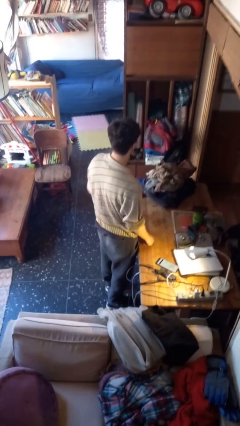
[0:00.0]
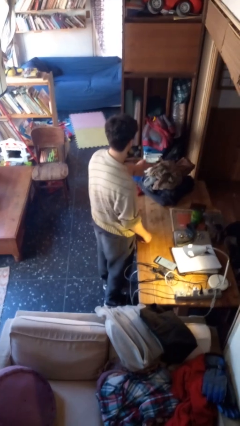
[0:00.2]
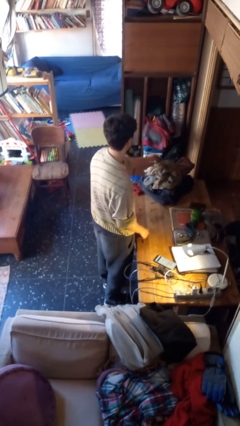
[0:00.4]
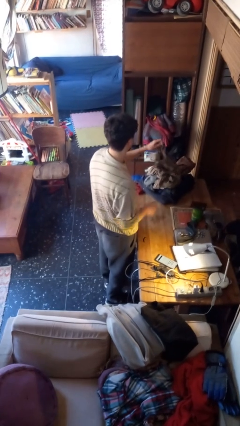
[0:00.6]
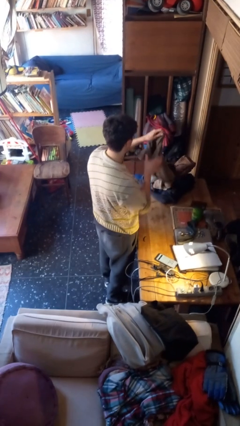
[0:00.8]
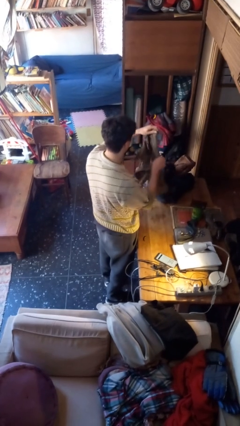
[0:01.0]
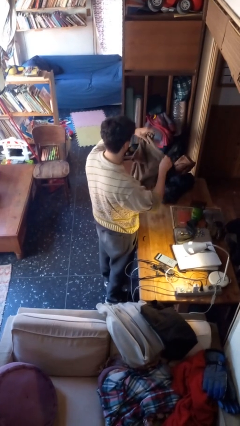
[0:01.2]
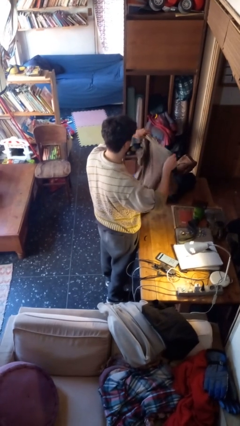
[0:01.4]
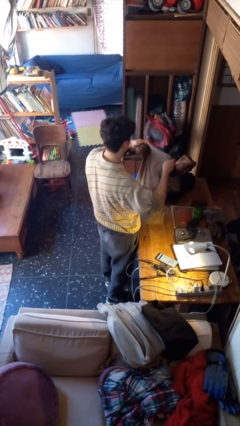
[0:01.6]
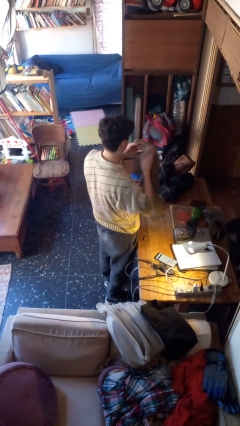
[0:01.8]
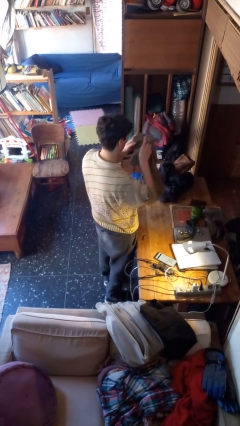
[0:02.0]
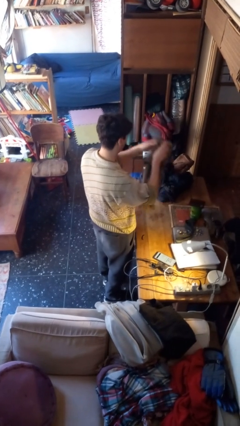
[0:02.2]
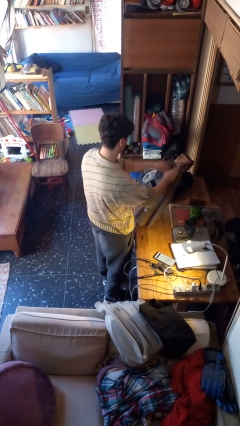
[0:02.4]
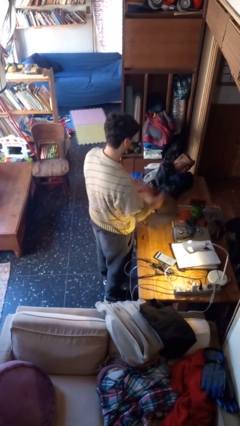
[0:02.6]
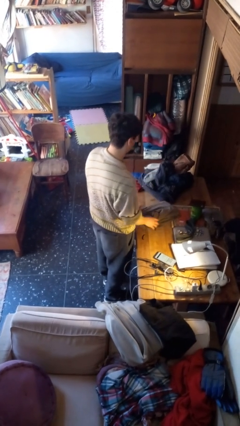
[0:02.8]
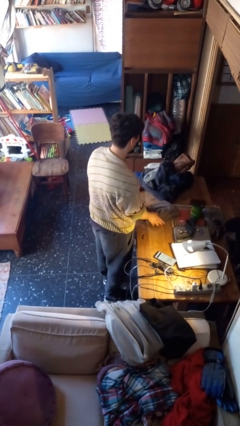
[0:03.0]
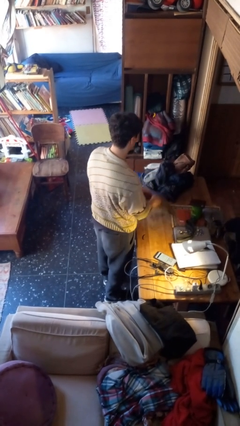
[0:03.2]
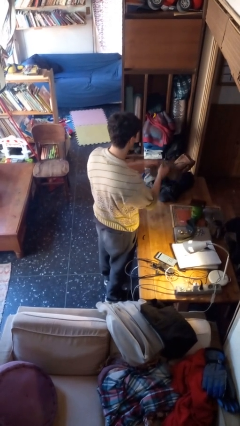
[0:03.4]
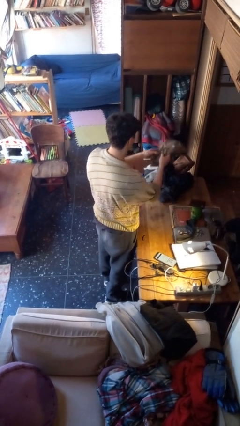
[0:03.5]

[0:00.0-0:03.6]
person folds shirt

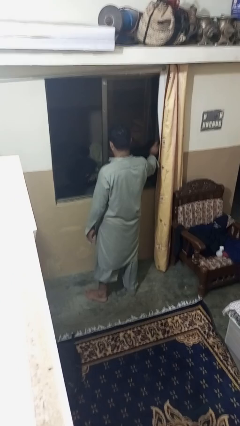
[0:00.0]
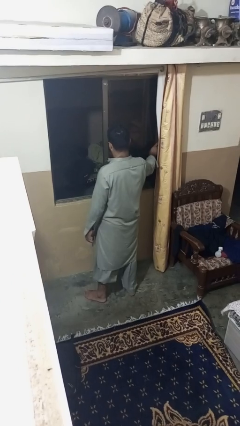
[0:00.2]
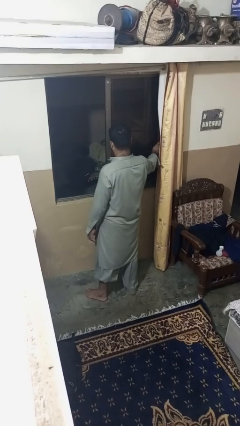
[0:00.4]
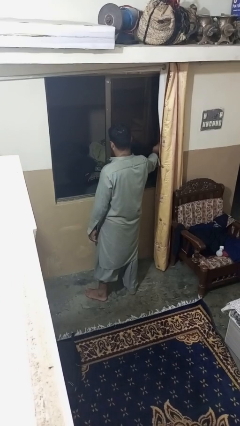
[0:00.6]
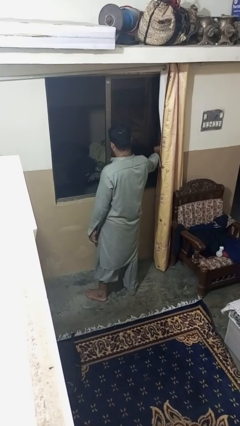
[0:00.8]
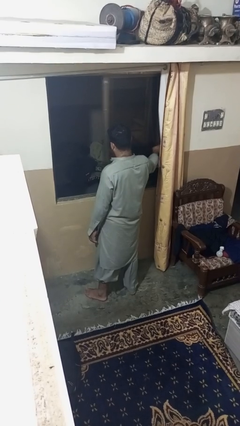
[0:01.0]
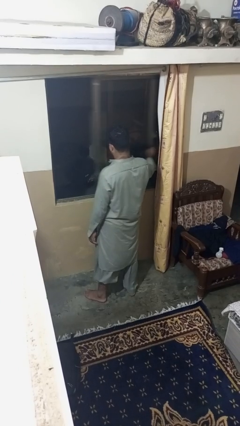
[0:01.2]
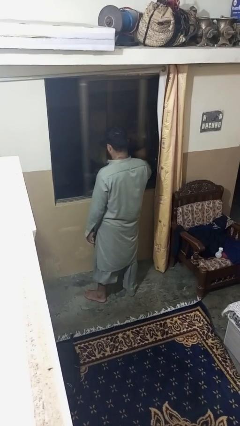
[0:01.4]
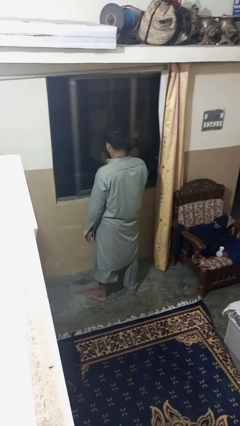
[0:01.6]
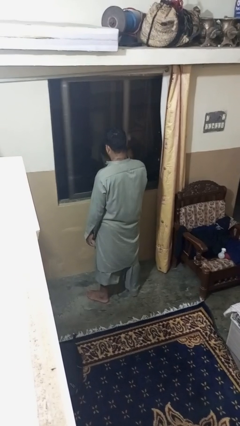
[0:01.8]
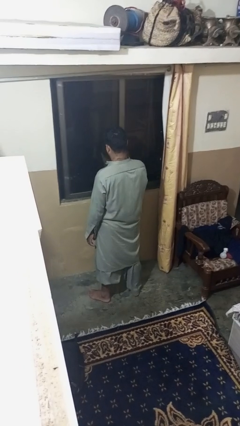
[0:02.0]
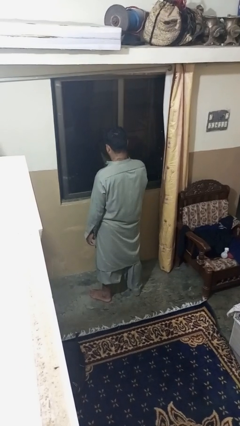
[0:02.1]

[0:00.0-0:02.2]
person closes home window

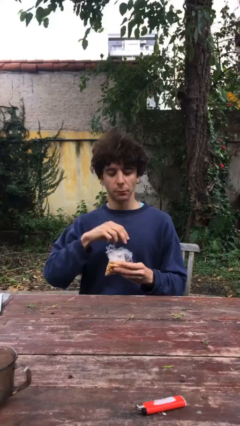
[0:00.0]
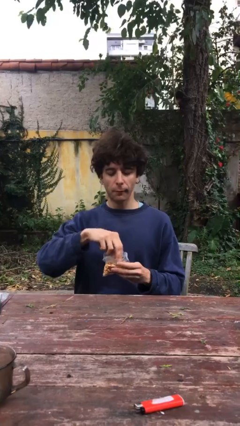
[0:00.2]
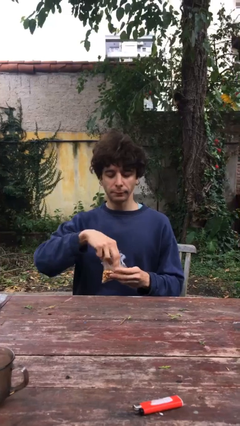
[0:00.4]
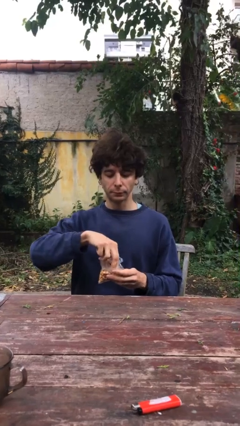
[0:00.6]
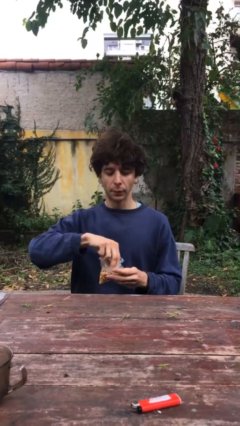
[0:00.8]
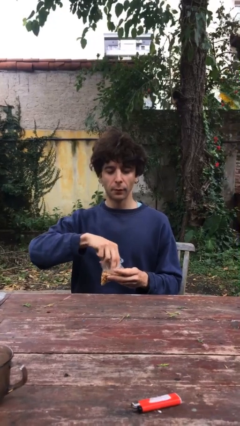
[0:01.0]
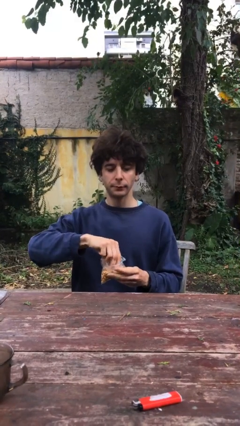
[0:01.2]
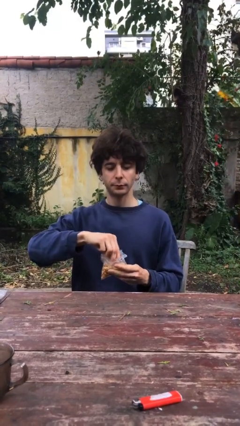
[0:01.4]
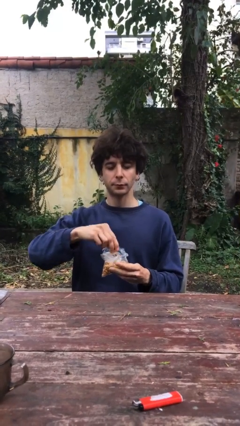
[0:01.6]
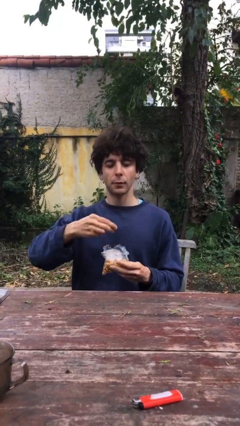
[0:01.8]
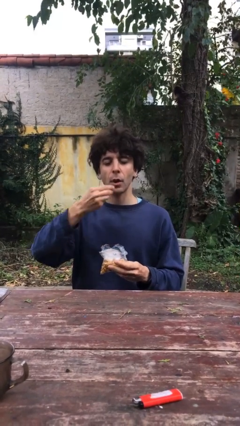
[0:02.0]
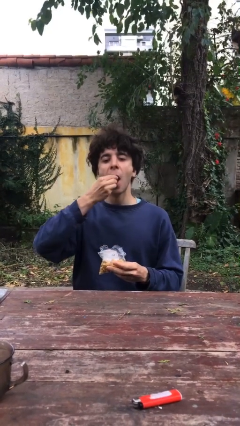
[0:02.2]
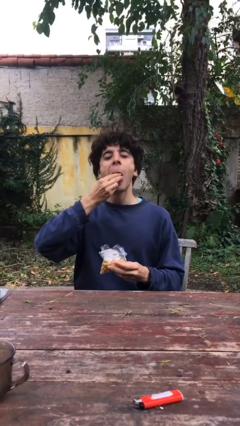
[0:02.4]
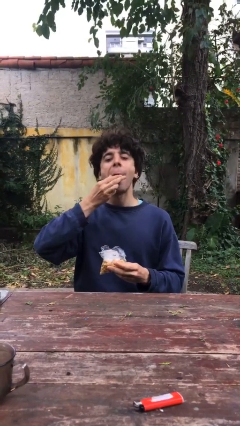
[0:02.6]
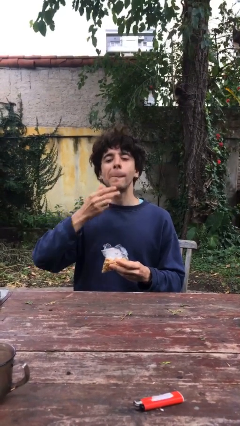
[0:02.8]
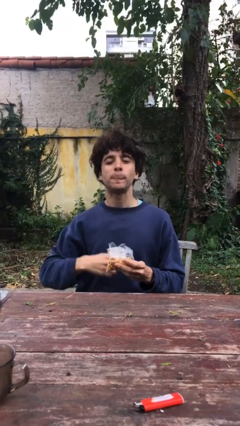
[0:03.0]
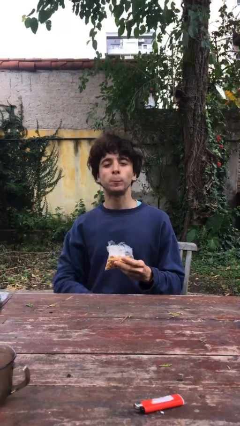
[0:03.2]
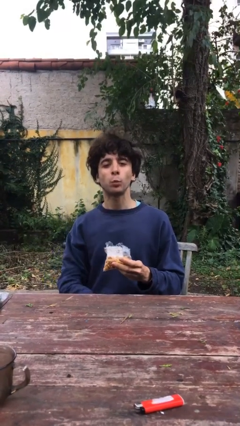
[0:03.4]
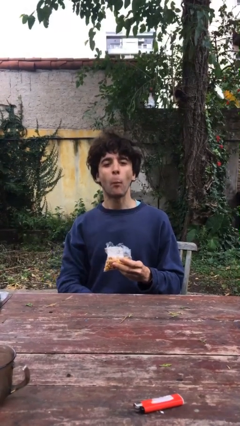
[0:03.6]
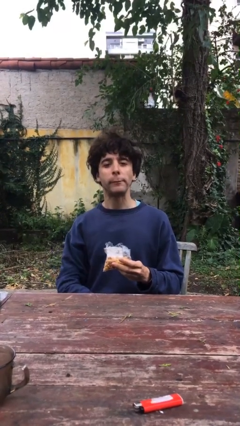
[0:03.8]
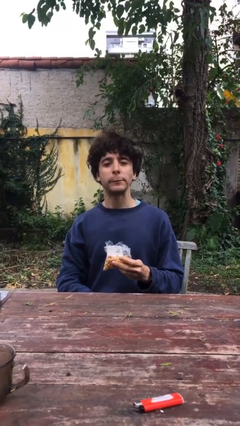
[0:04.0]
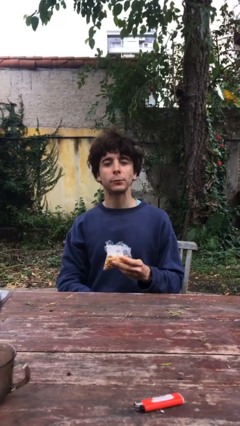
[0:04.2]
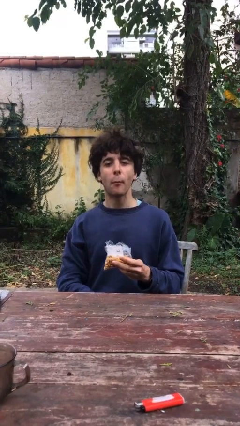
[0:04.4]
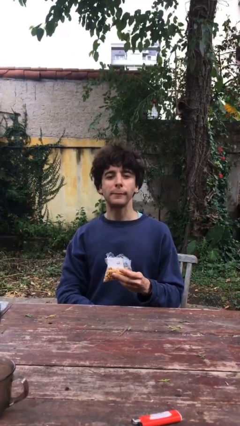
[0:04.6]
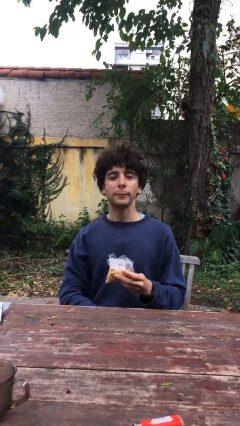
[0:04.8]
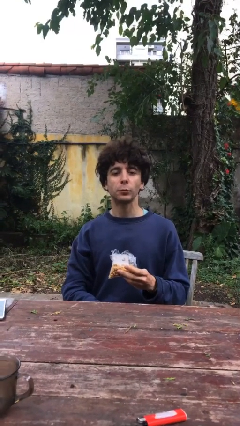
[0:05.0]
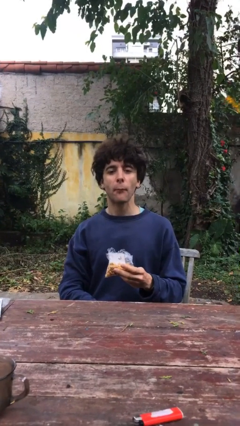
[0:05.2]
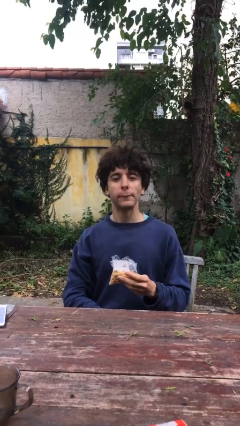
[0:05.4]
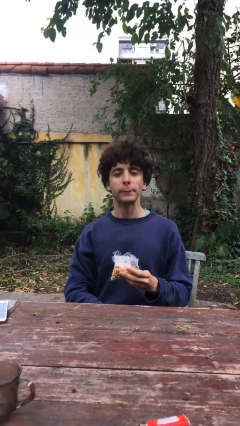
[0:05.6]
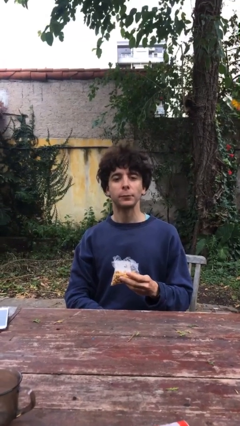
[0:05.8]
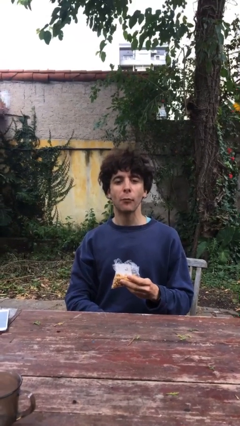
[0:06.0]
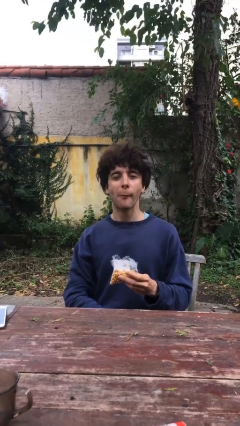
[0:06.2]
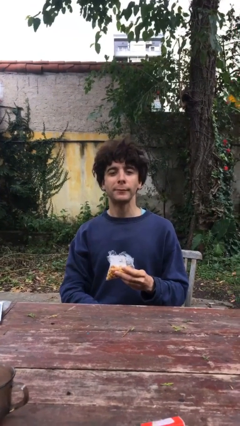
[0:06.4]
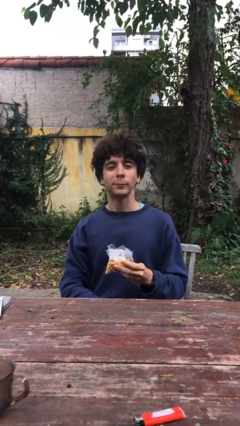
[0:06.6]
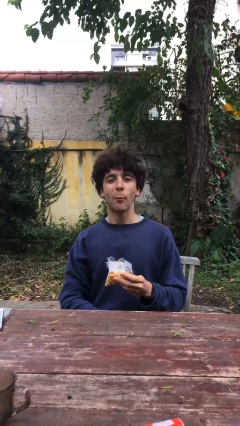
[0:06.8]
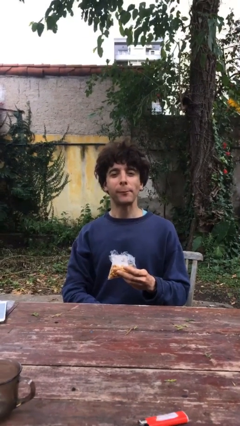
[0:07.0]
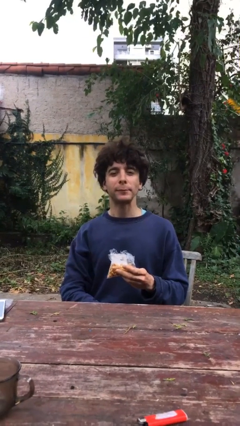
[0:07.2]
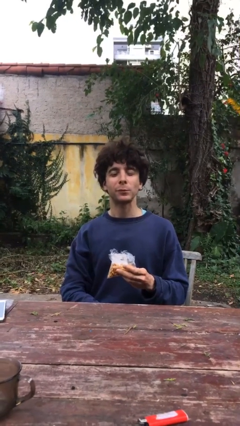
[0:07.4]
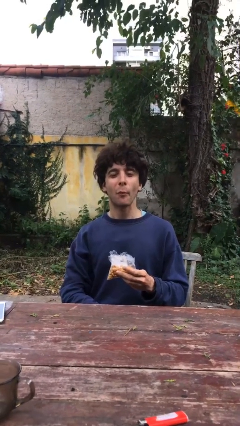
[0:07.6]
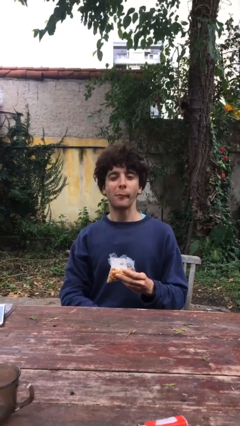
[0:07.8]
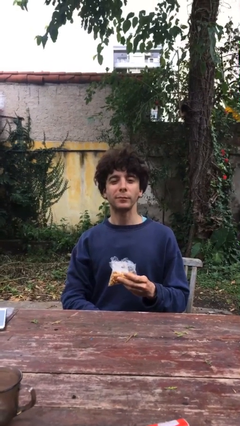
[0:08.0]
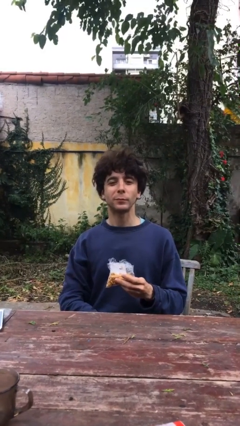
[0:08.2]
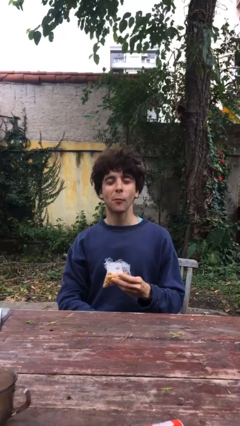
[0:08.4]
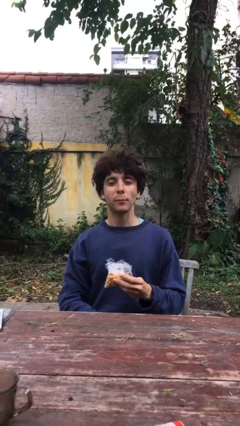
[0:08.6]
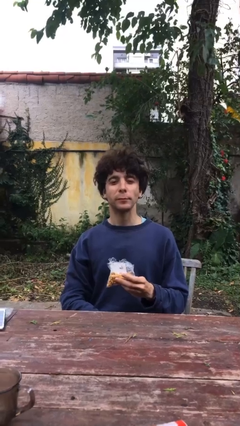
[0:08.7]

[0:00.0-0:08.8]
person eats snack from bag

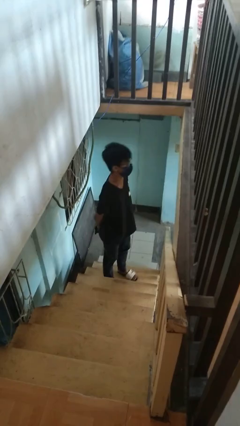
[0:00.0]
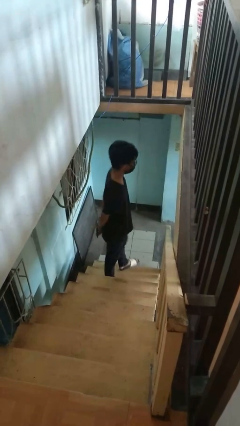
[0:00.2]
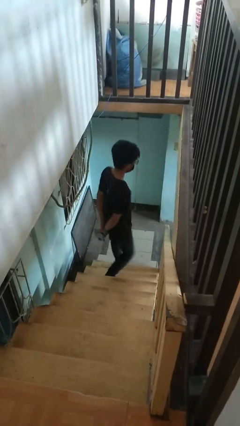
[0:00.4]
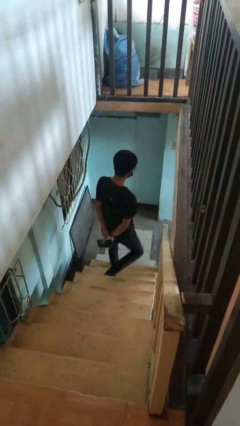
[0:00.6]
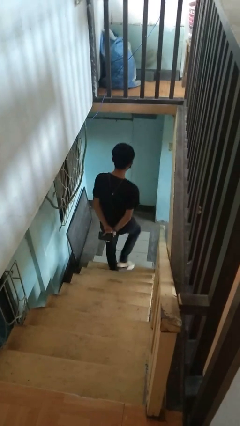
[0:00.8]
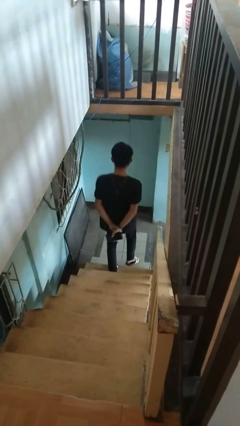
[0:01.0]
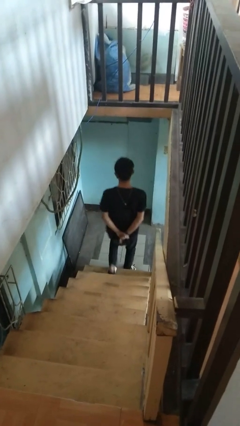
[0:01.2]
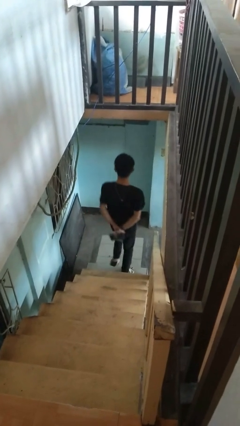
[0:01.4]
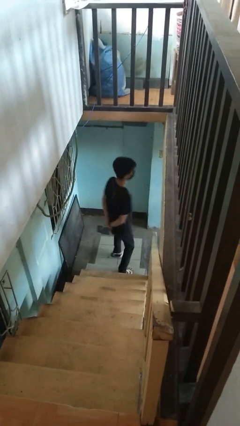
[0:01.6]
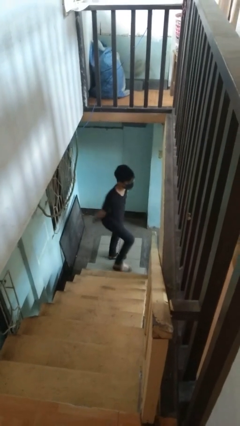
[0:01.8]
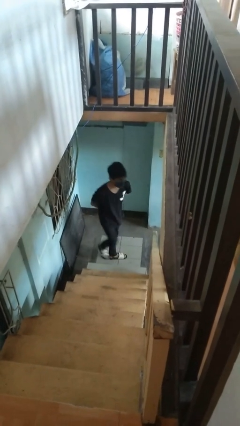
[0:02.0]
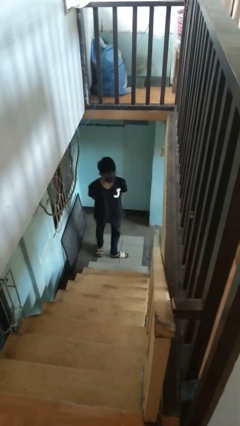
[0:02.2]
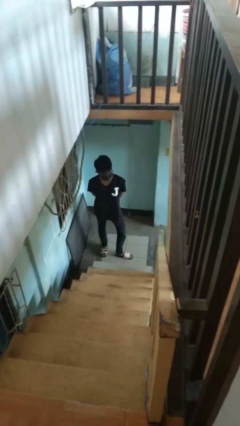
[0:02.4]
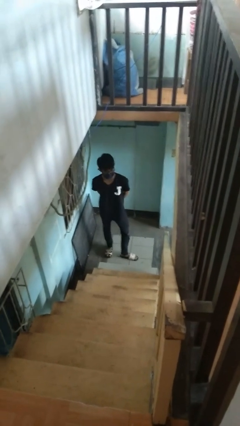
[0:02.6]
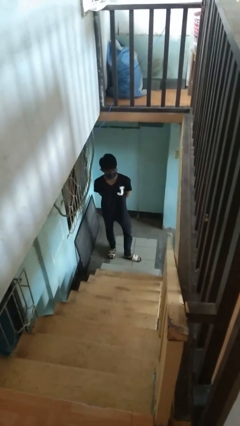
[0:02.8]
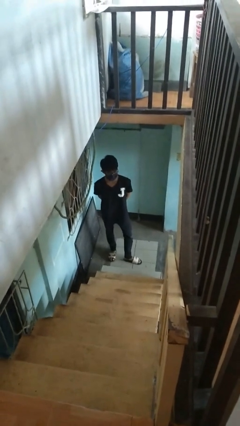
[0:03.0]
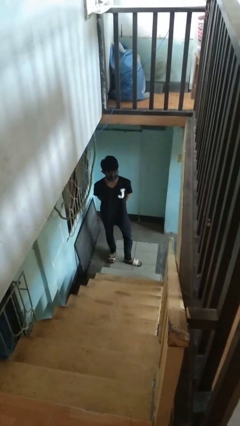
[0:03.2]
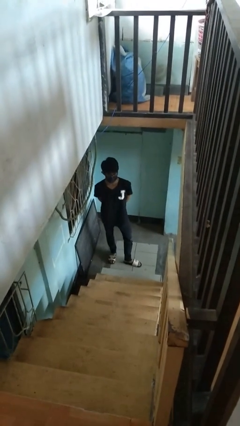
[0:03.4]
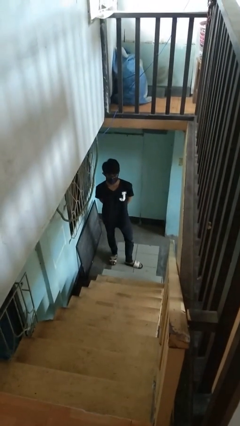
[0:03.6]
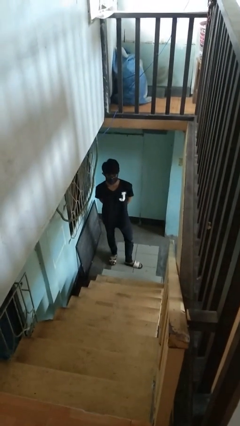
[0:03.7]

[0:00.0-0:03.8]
person climbs down ladder
